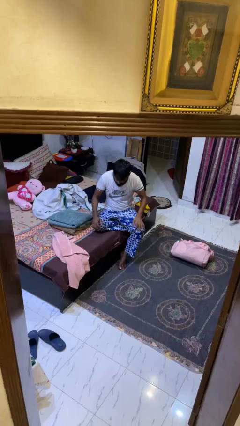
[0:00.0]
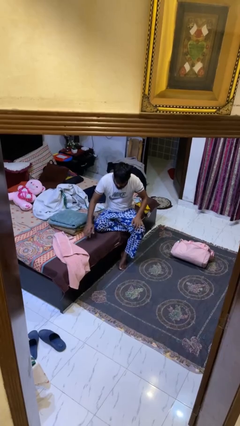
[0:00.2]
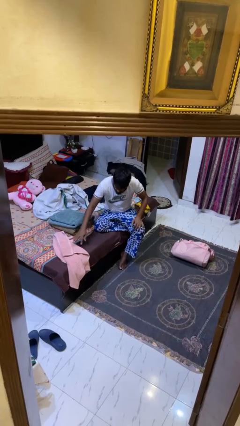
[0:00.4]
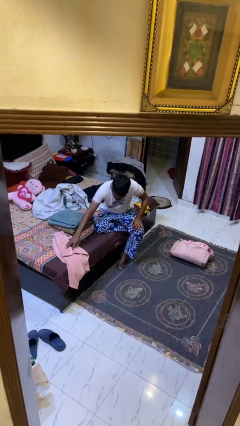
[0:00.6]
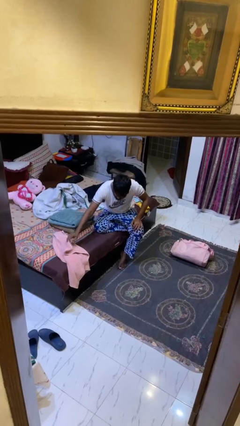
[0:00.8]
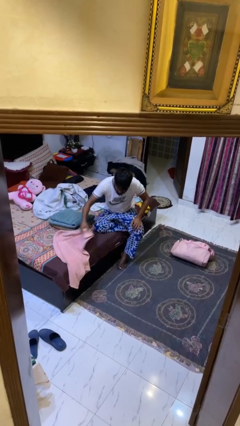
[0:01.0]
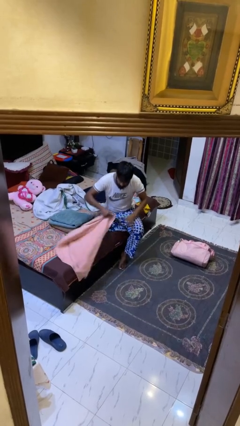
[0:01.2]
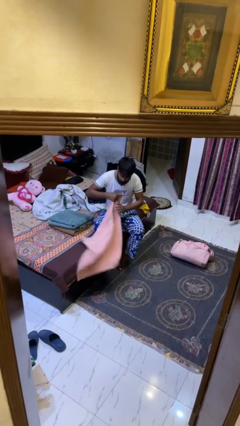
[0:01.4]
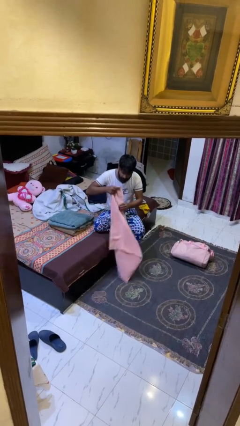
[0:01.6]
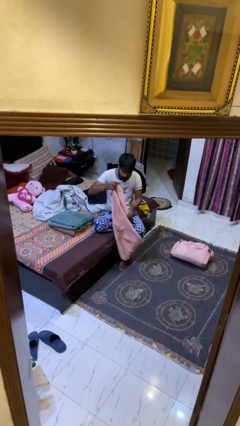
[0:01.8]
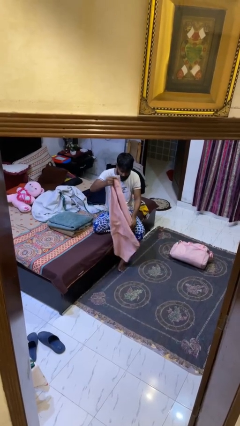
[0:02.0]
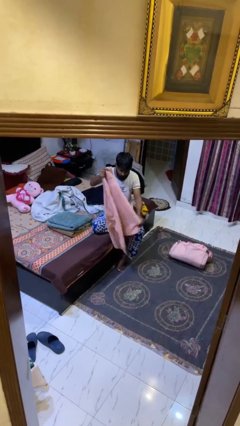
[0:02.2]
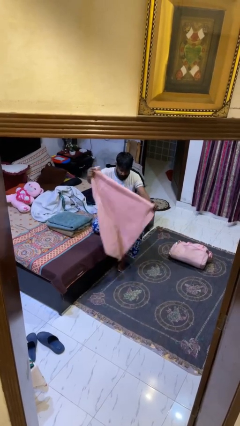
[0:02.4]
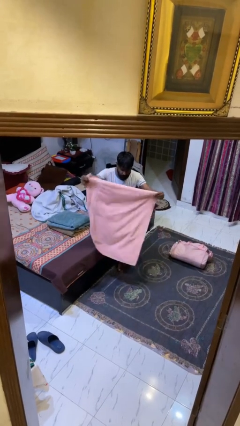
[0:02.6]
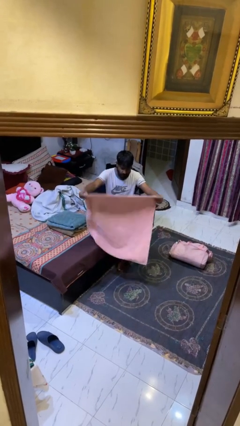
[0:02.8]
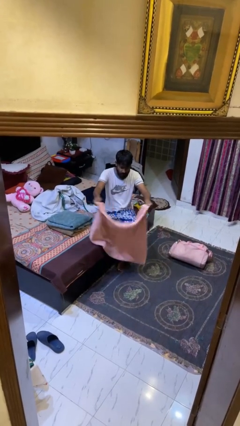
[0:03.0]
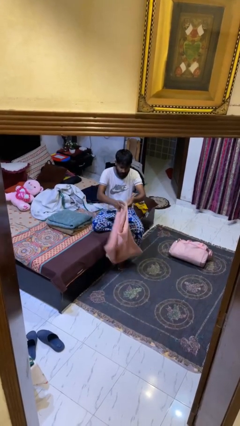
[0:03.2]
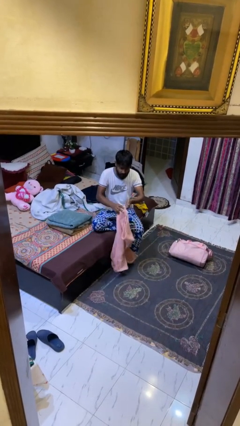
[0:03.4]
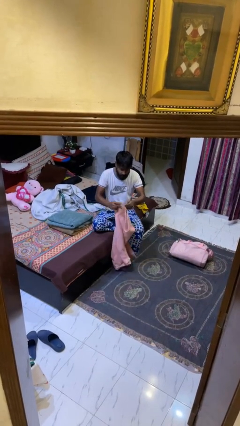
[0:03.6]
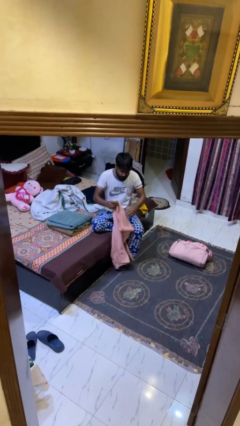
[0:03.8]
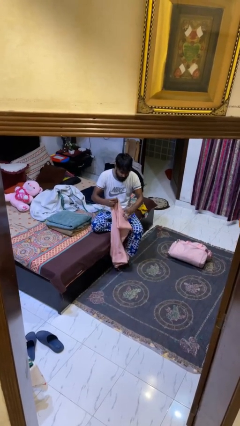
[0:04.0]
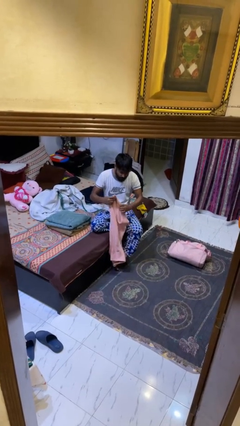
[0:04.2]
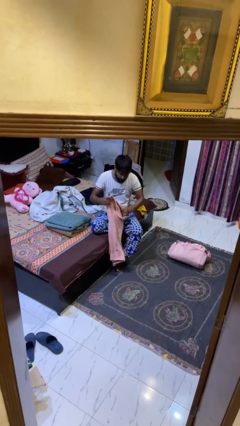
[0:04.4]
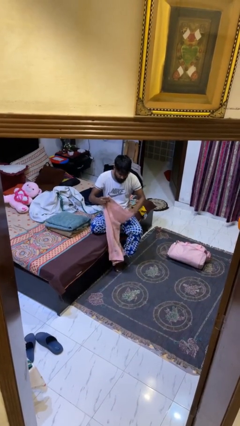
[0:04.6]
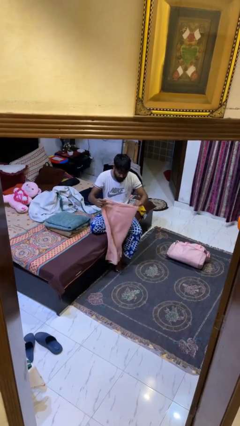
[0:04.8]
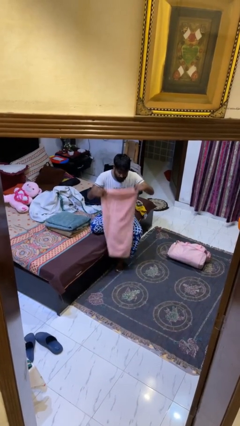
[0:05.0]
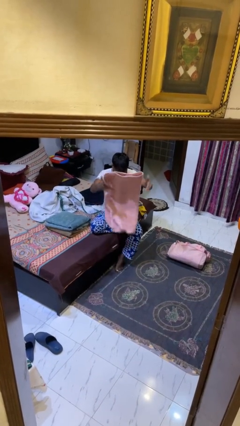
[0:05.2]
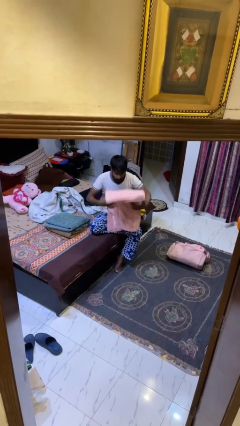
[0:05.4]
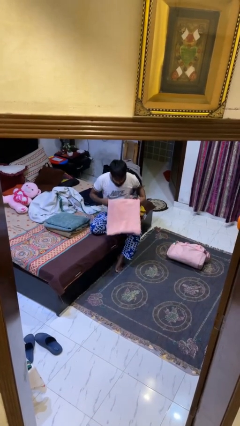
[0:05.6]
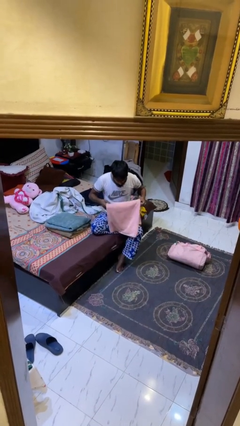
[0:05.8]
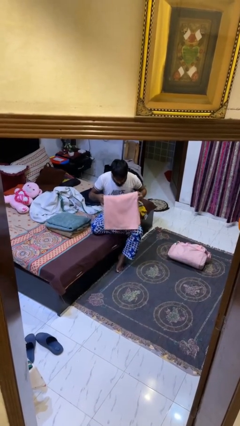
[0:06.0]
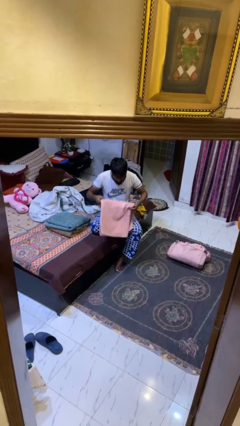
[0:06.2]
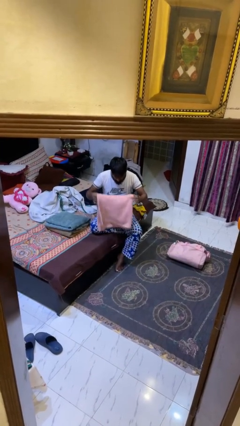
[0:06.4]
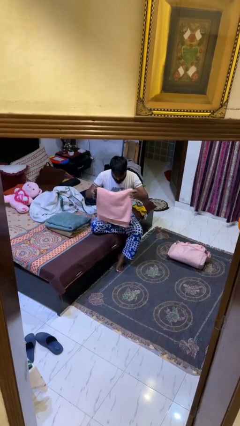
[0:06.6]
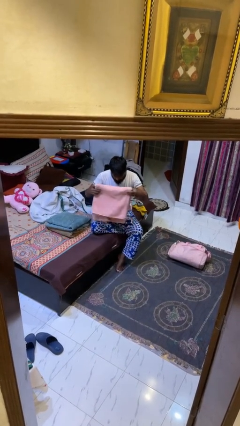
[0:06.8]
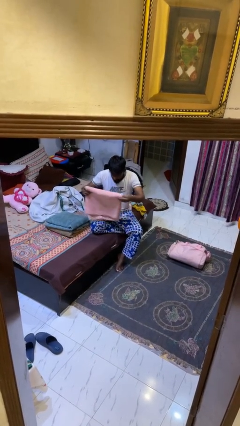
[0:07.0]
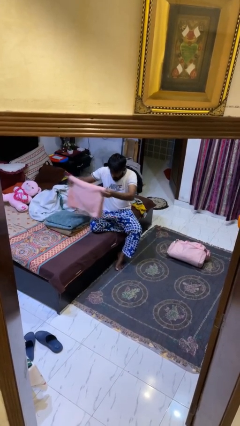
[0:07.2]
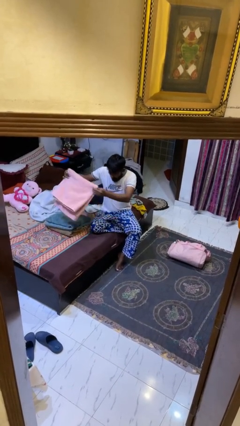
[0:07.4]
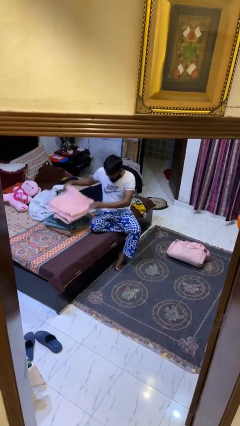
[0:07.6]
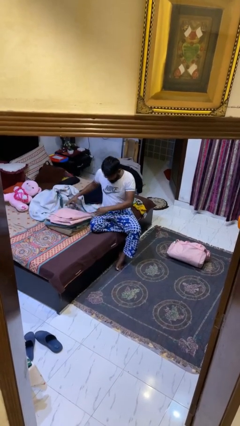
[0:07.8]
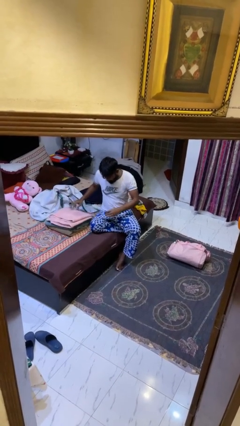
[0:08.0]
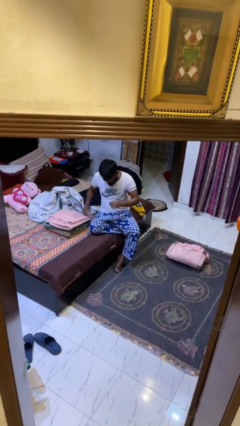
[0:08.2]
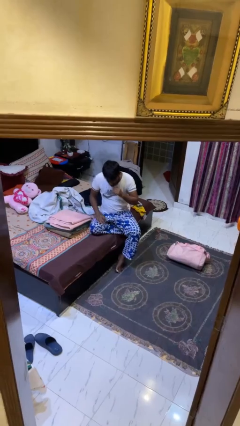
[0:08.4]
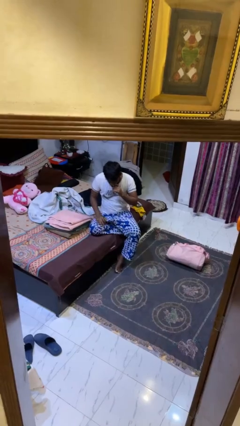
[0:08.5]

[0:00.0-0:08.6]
person folds towel

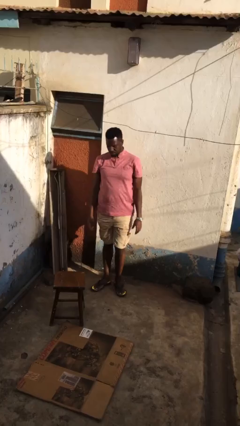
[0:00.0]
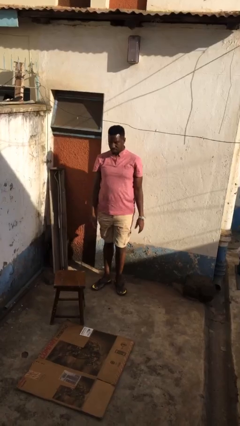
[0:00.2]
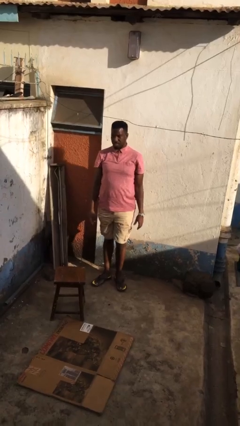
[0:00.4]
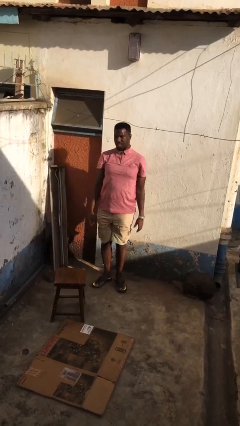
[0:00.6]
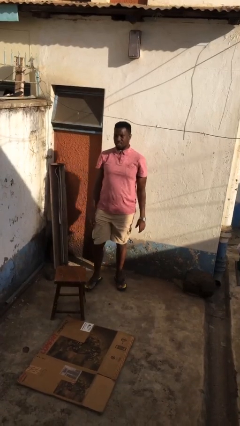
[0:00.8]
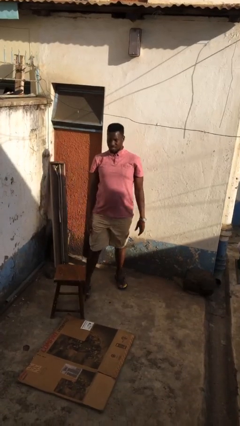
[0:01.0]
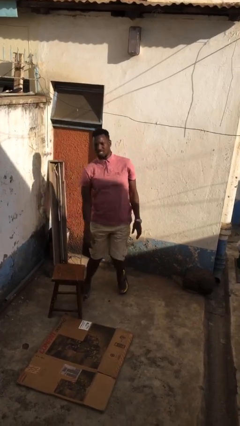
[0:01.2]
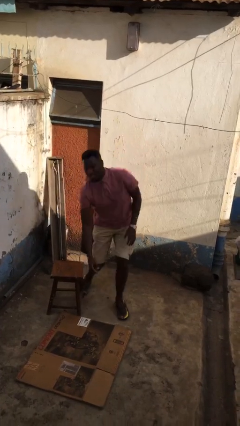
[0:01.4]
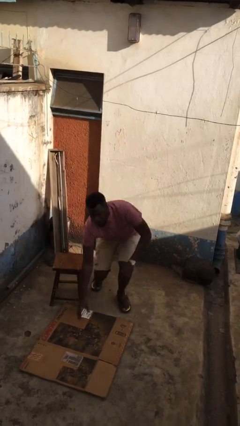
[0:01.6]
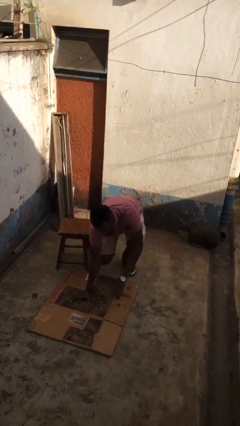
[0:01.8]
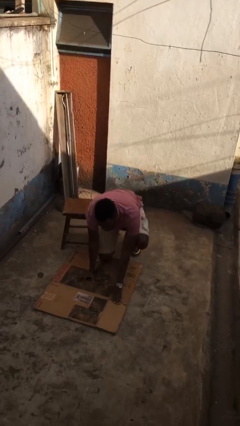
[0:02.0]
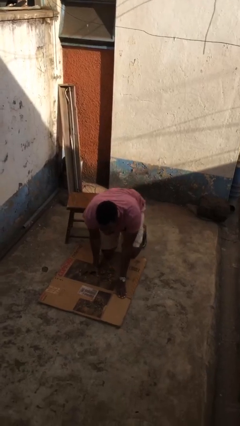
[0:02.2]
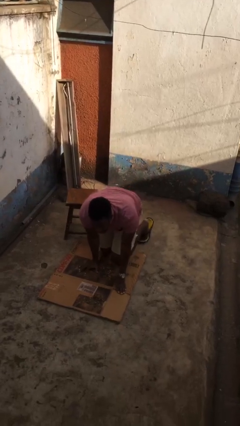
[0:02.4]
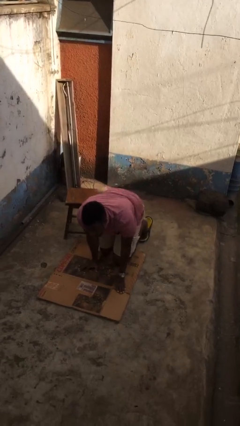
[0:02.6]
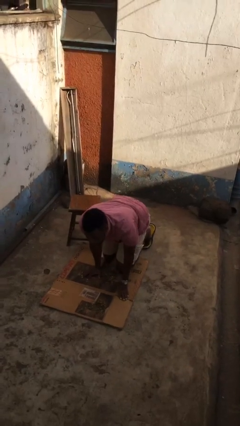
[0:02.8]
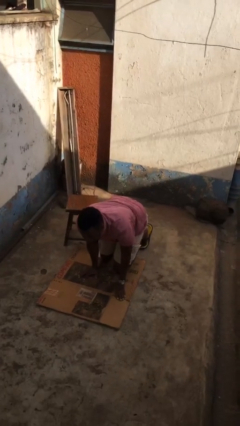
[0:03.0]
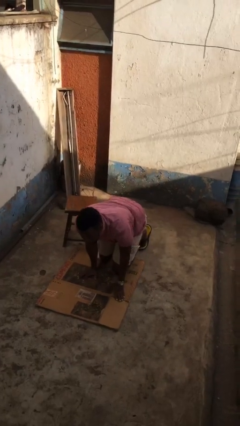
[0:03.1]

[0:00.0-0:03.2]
person trips on object on floor

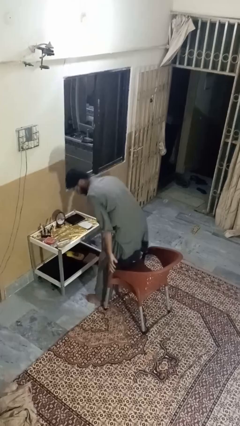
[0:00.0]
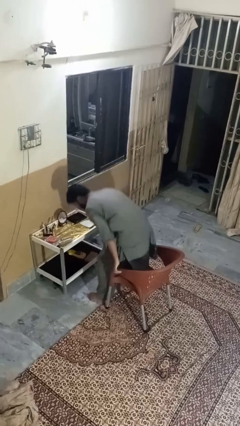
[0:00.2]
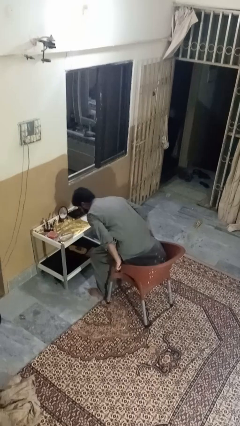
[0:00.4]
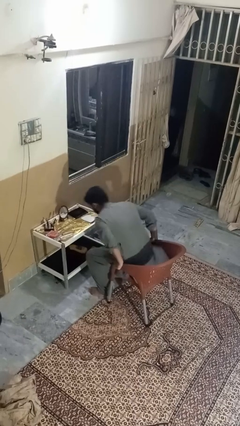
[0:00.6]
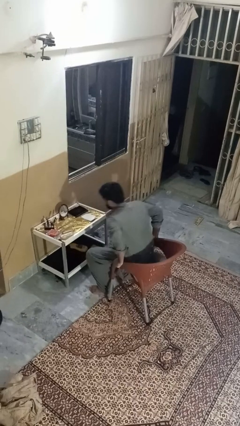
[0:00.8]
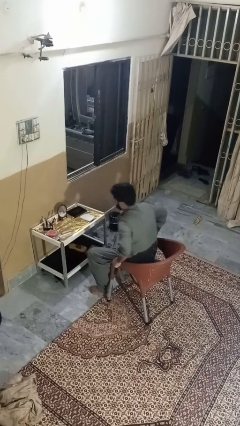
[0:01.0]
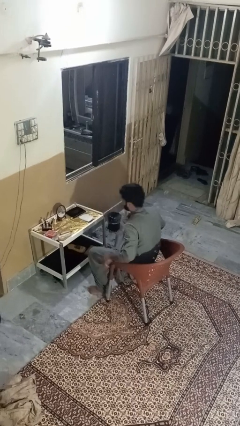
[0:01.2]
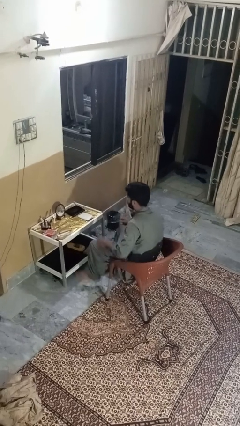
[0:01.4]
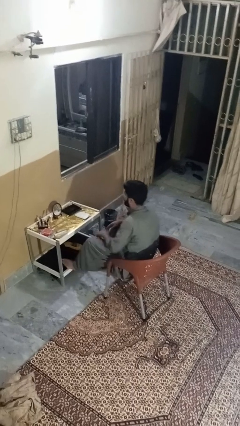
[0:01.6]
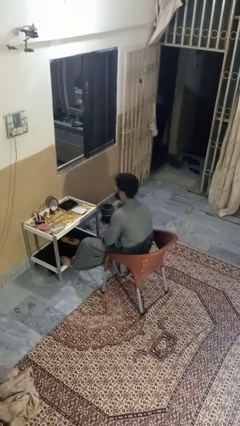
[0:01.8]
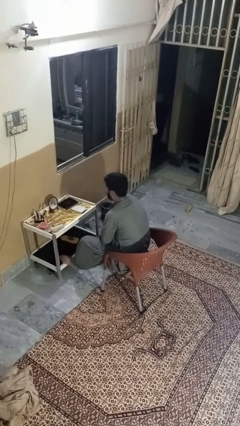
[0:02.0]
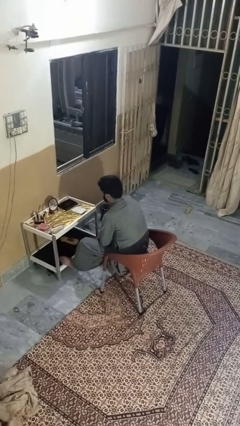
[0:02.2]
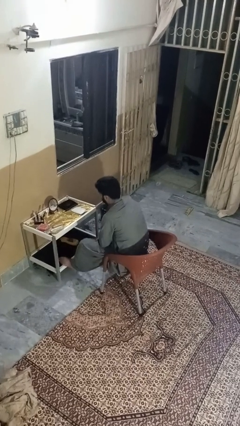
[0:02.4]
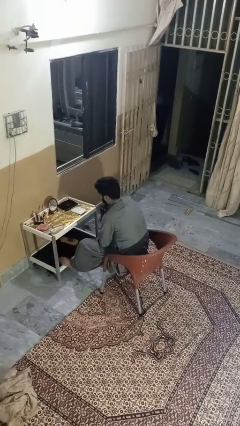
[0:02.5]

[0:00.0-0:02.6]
person sits down

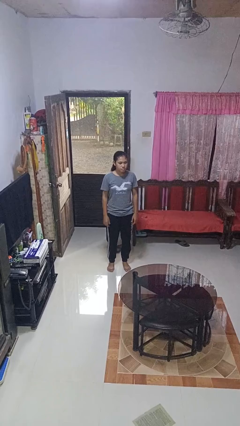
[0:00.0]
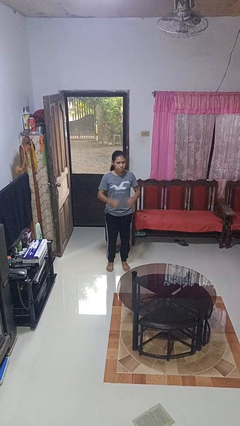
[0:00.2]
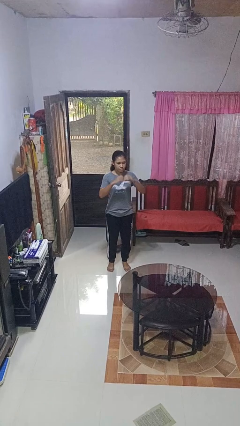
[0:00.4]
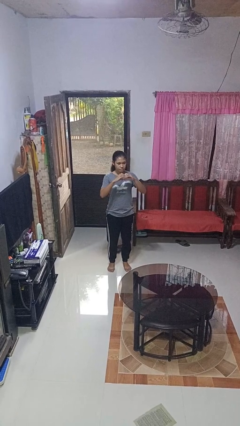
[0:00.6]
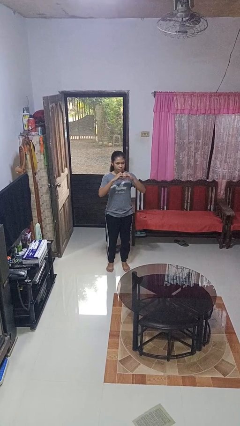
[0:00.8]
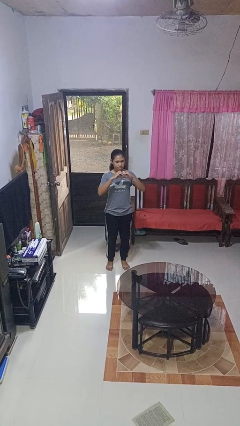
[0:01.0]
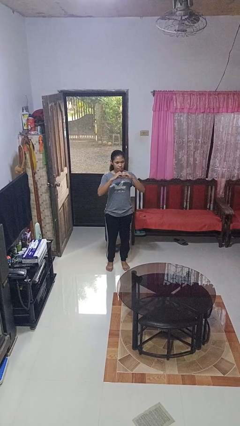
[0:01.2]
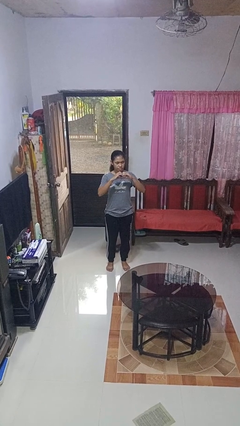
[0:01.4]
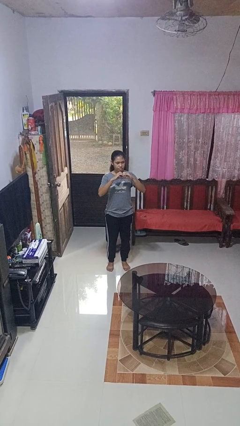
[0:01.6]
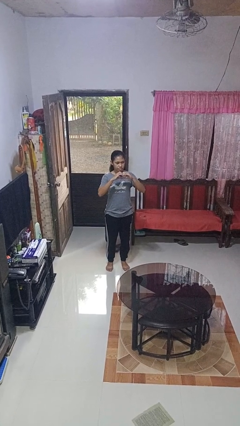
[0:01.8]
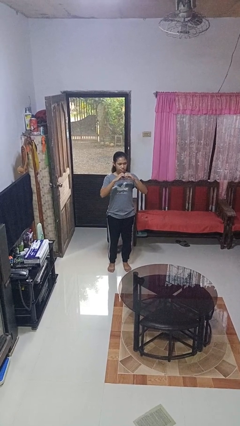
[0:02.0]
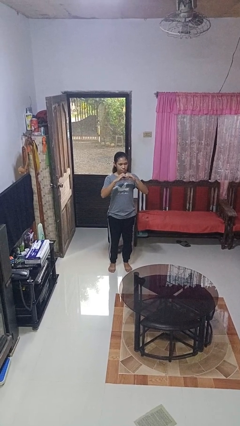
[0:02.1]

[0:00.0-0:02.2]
person gestures heart

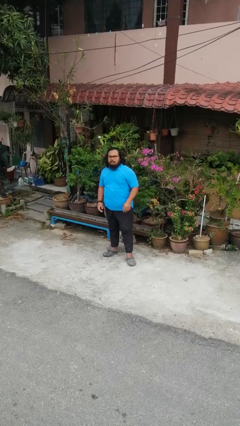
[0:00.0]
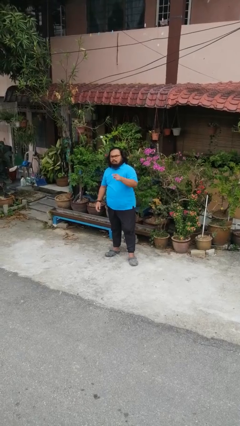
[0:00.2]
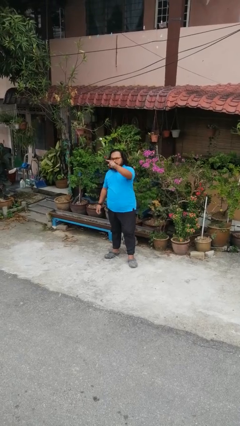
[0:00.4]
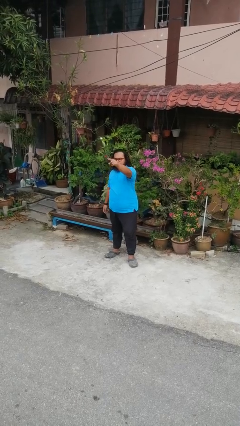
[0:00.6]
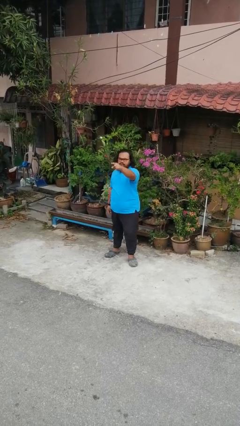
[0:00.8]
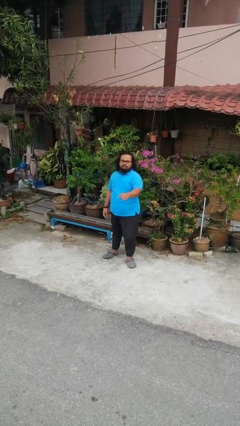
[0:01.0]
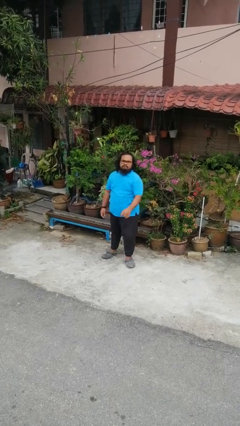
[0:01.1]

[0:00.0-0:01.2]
person points at person
